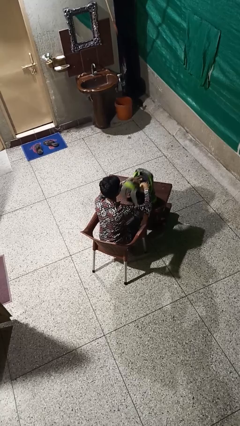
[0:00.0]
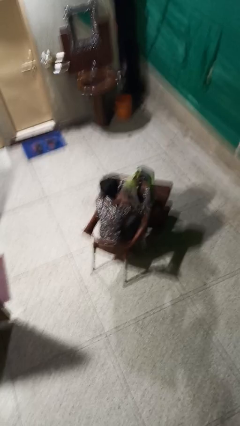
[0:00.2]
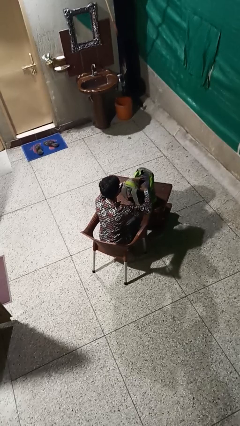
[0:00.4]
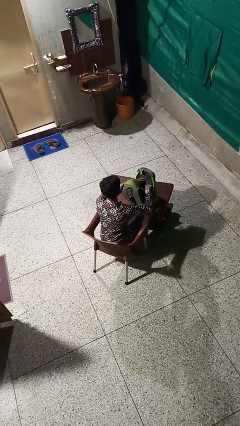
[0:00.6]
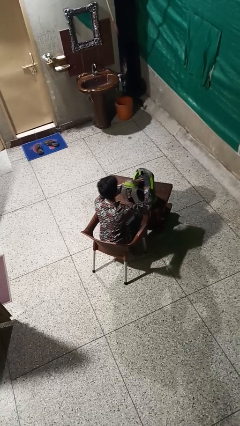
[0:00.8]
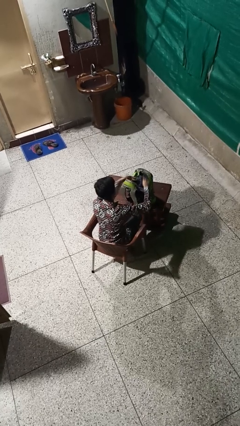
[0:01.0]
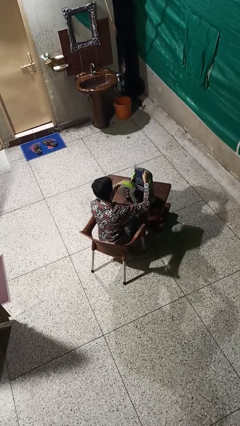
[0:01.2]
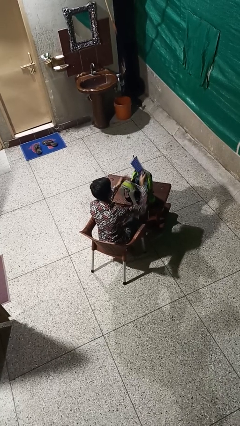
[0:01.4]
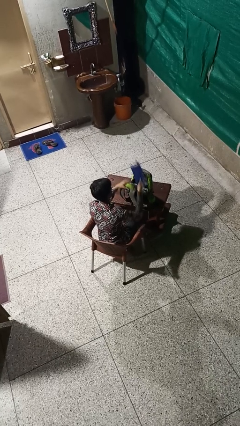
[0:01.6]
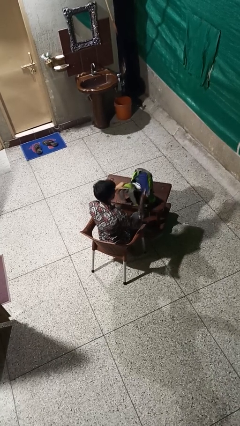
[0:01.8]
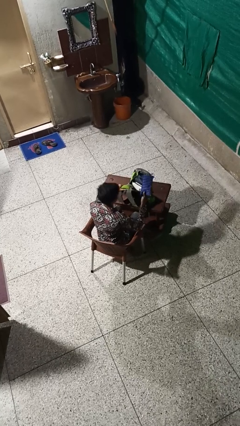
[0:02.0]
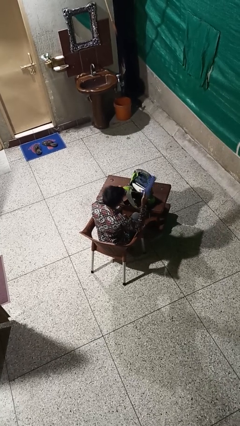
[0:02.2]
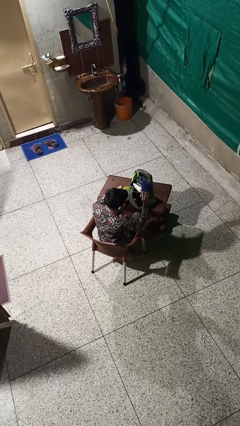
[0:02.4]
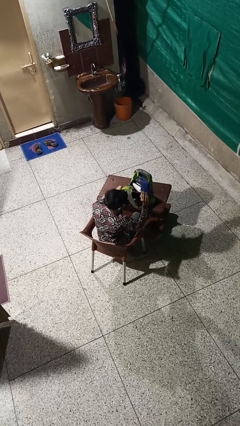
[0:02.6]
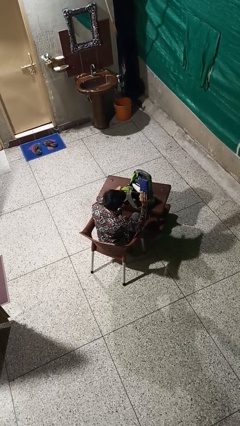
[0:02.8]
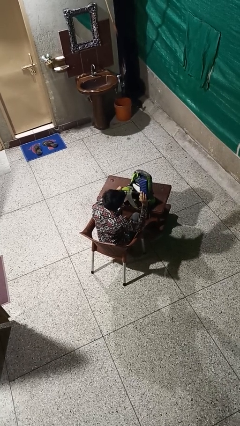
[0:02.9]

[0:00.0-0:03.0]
person takes object from backpack

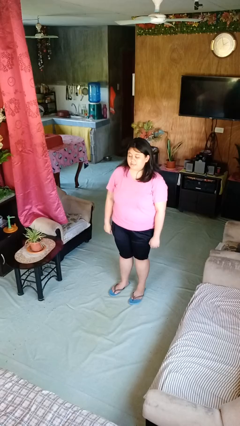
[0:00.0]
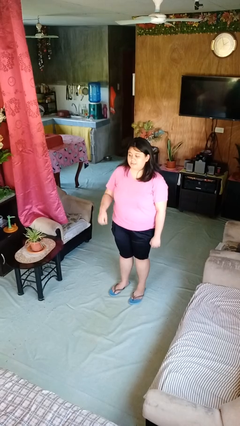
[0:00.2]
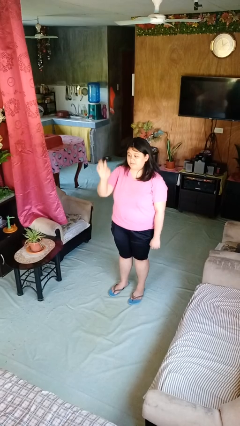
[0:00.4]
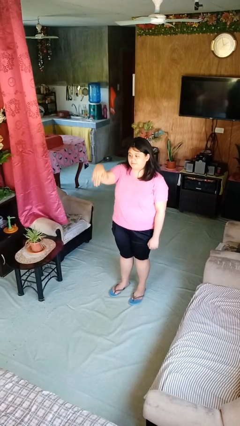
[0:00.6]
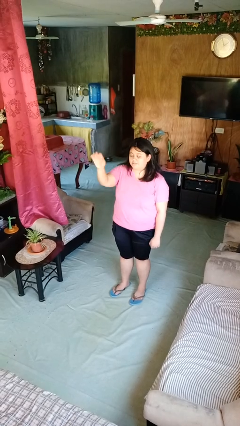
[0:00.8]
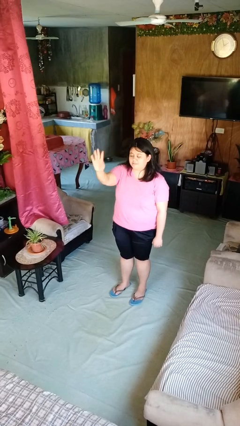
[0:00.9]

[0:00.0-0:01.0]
person gestures come here

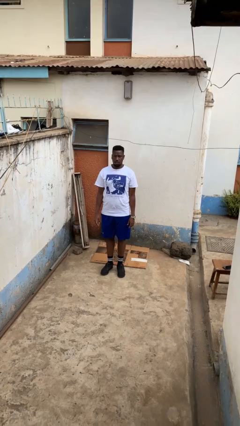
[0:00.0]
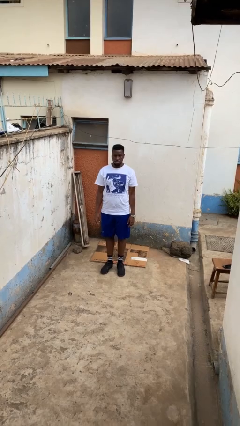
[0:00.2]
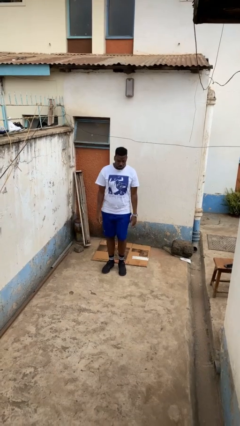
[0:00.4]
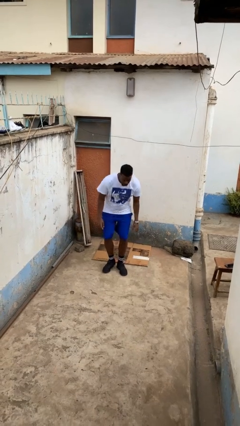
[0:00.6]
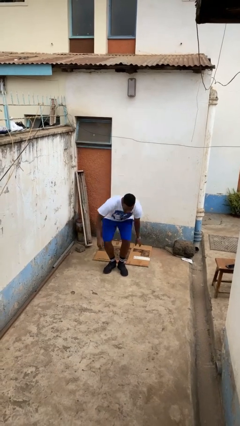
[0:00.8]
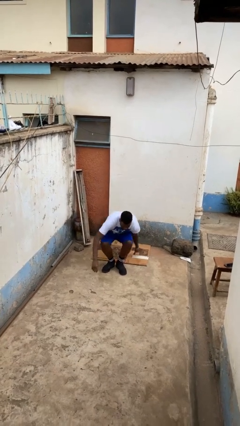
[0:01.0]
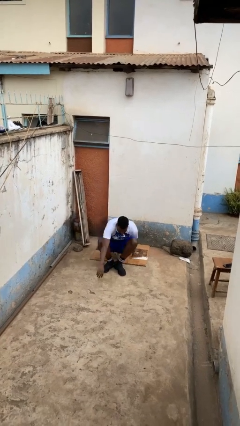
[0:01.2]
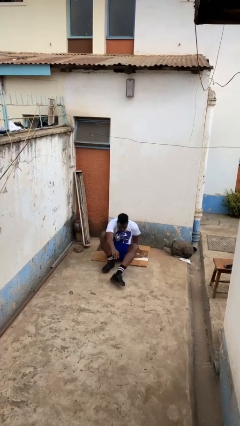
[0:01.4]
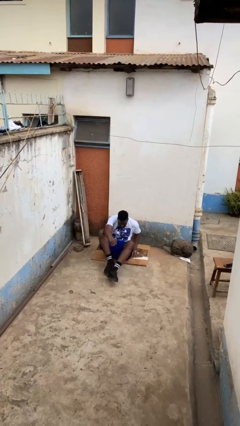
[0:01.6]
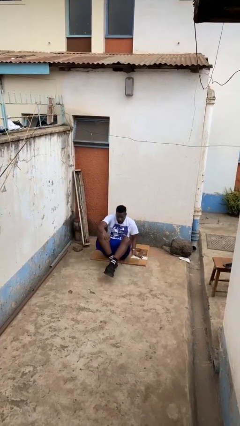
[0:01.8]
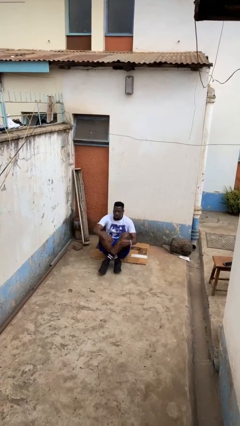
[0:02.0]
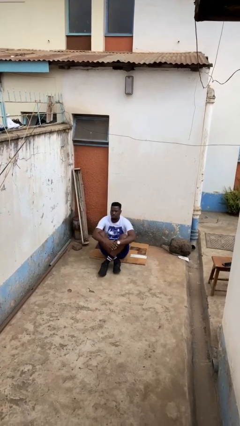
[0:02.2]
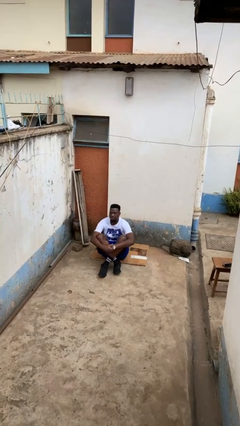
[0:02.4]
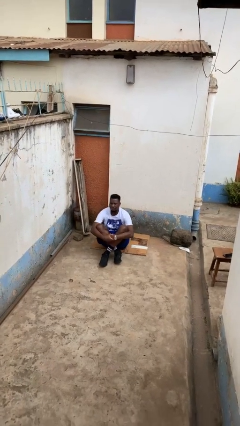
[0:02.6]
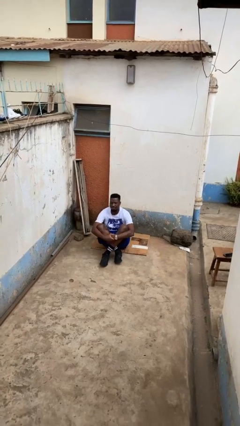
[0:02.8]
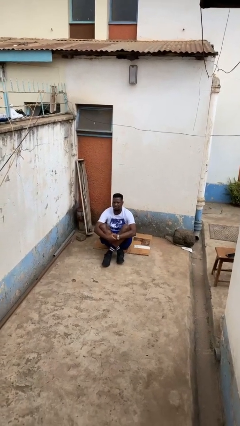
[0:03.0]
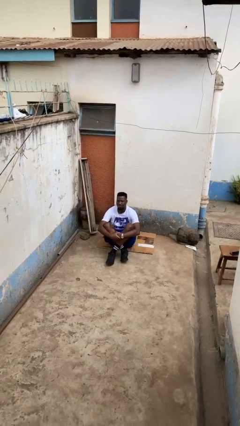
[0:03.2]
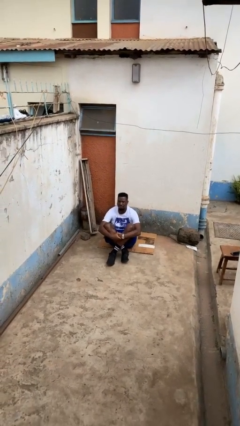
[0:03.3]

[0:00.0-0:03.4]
person sits crisscross

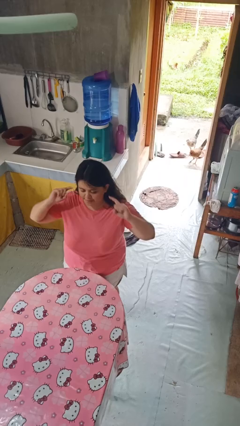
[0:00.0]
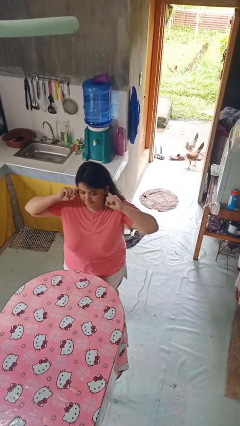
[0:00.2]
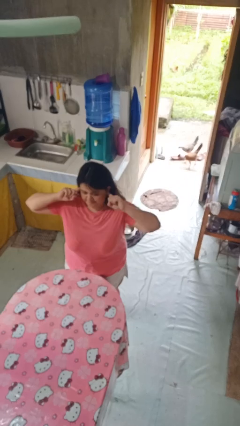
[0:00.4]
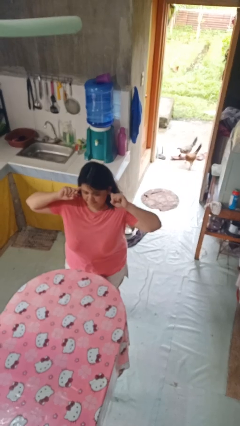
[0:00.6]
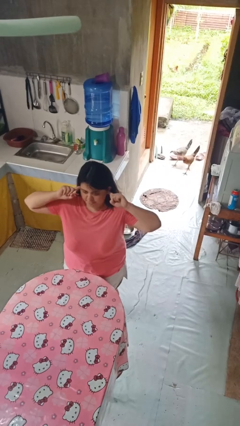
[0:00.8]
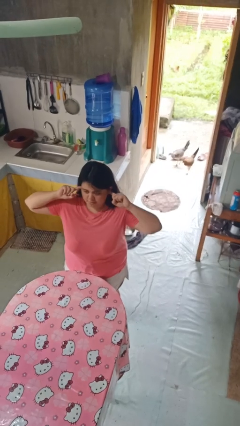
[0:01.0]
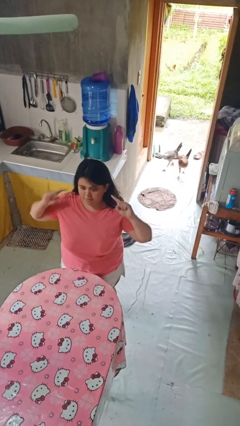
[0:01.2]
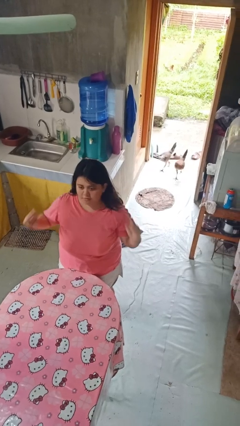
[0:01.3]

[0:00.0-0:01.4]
person puts fingers in ear

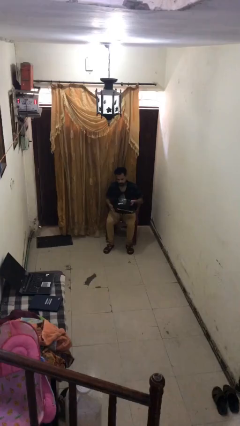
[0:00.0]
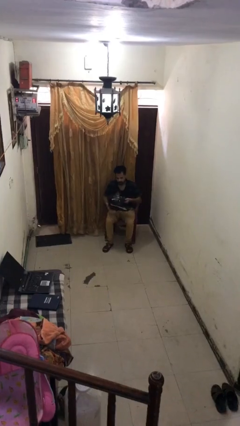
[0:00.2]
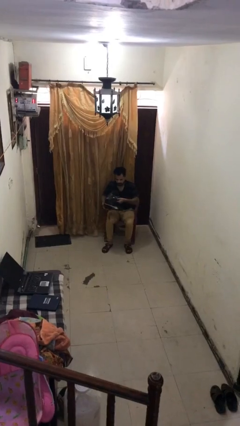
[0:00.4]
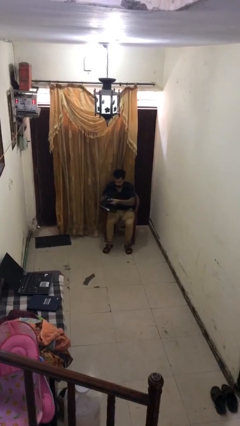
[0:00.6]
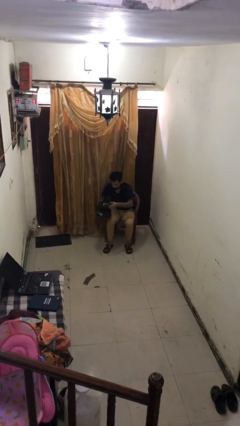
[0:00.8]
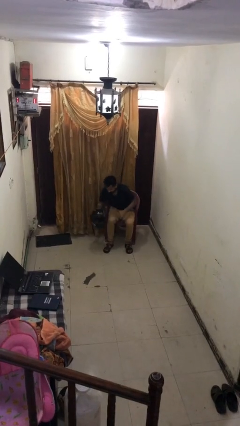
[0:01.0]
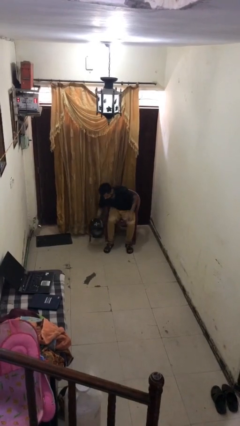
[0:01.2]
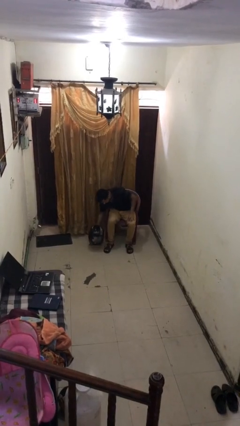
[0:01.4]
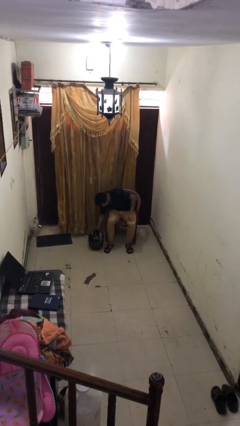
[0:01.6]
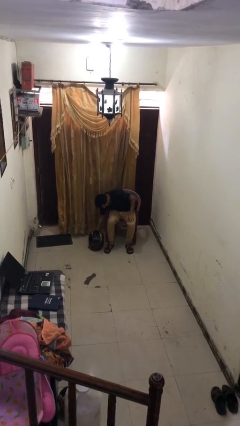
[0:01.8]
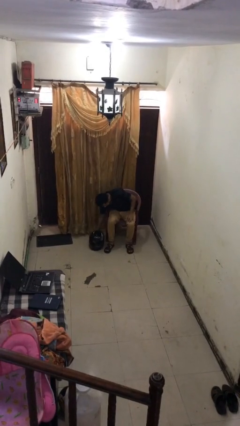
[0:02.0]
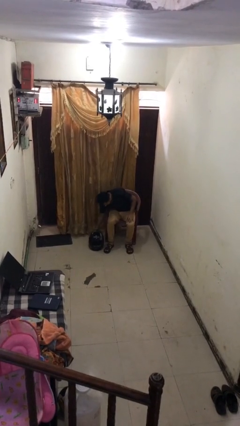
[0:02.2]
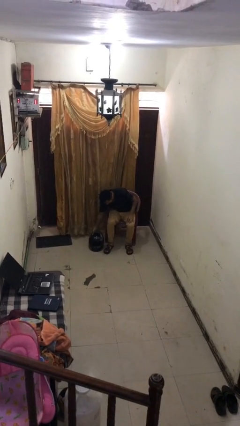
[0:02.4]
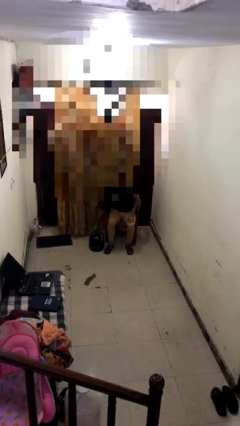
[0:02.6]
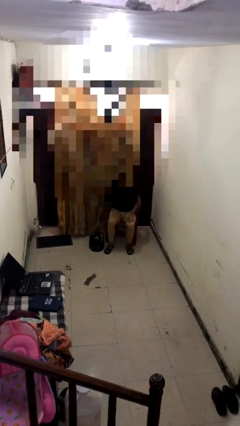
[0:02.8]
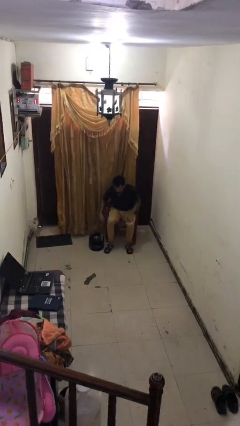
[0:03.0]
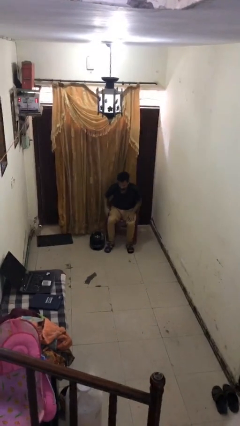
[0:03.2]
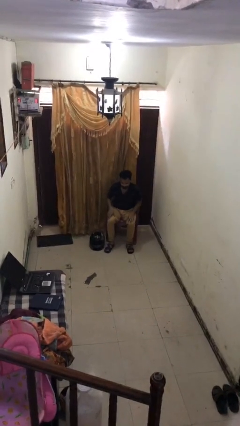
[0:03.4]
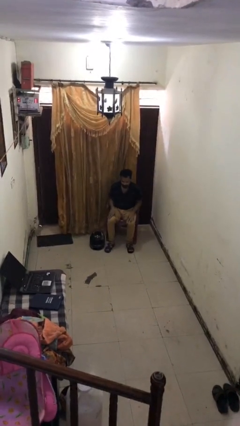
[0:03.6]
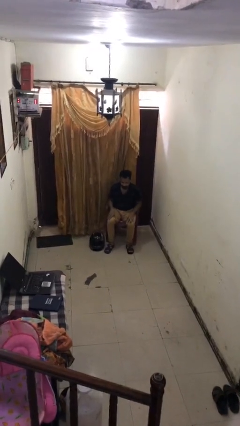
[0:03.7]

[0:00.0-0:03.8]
person puts down object on floor

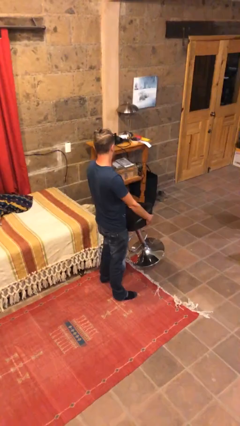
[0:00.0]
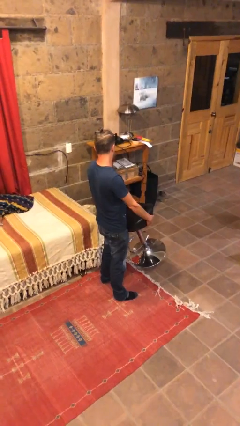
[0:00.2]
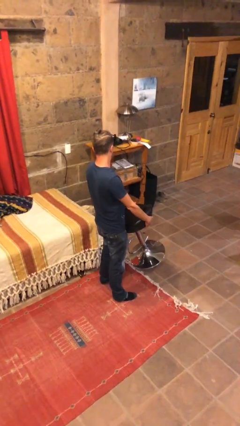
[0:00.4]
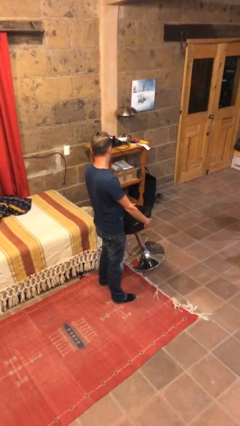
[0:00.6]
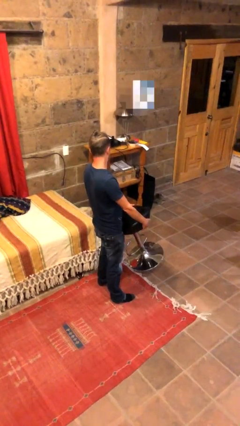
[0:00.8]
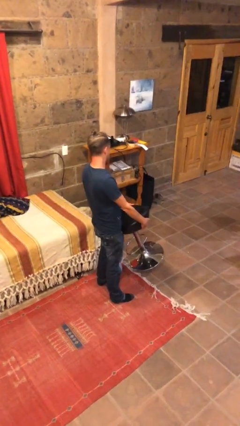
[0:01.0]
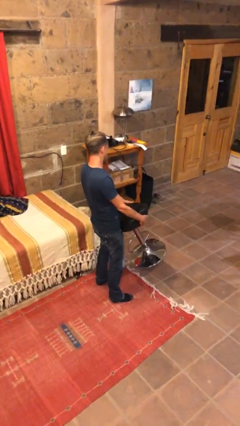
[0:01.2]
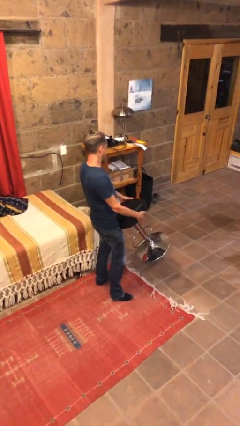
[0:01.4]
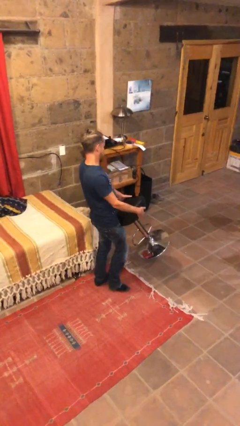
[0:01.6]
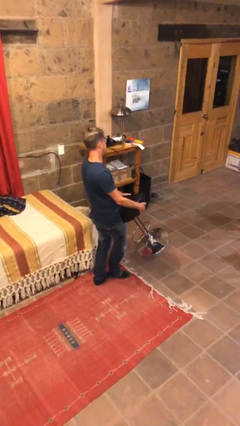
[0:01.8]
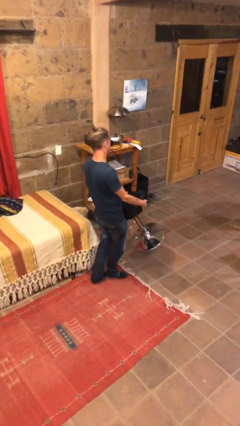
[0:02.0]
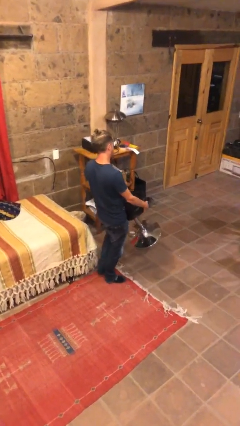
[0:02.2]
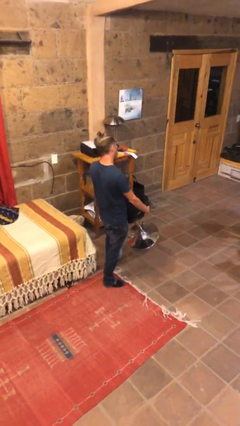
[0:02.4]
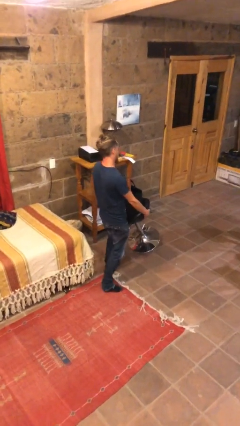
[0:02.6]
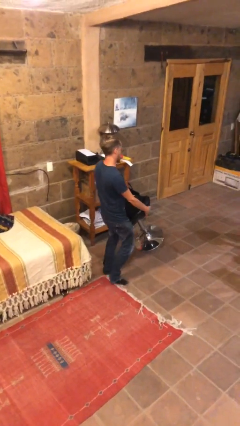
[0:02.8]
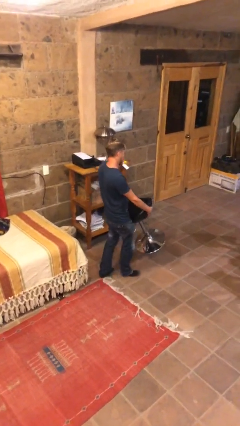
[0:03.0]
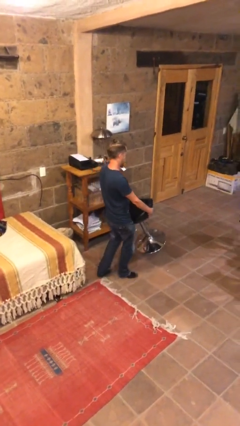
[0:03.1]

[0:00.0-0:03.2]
person carries heavy object

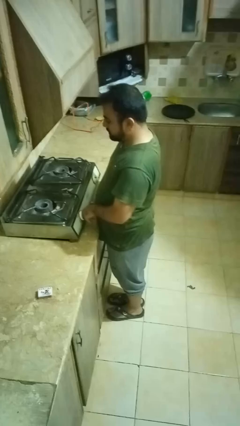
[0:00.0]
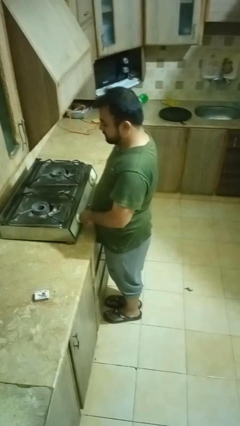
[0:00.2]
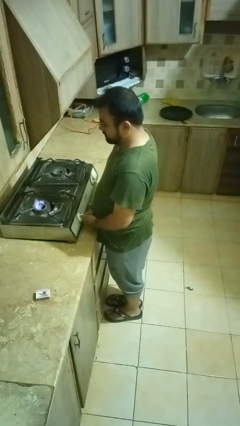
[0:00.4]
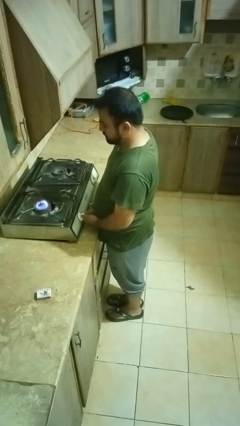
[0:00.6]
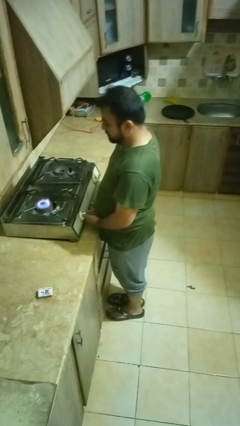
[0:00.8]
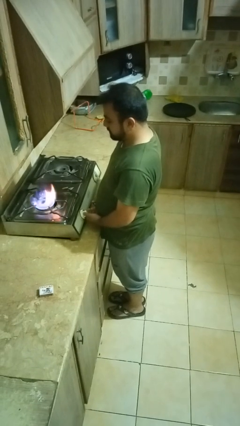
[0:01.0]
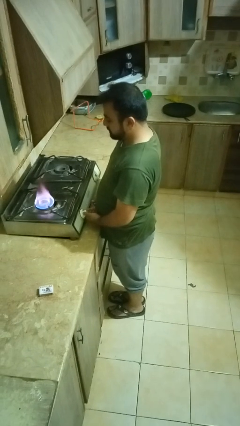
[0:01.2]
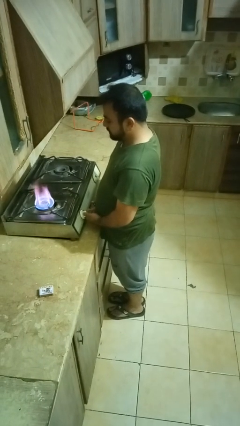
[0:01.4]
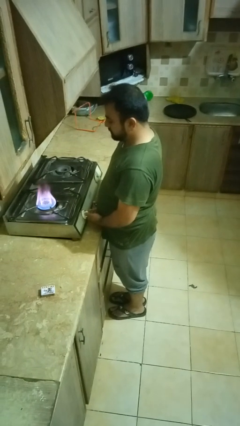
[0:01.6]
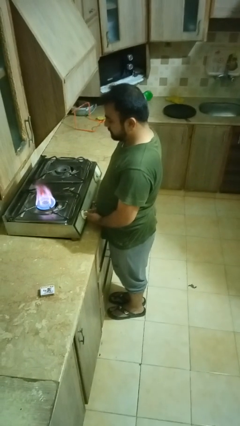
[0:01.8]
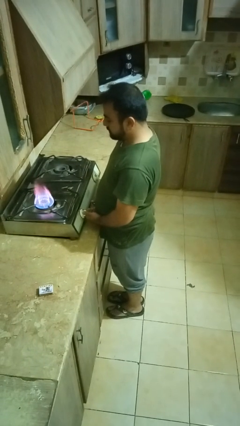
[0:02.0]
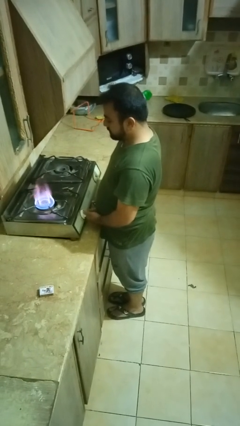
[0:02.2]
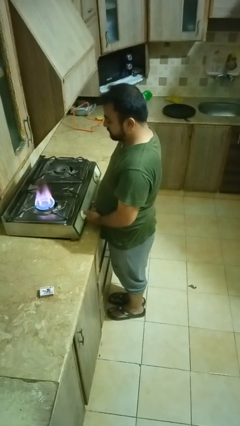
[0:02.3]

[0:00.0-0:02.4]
person turns on stovetop
